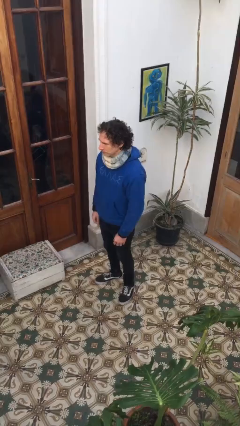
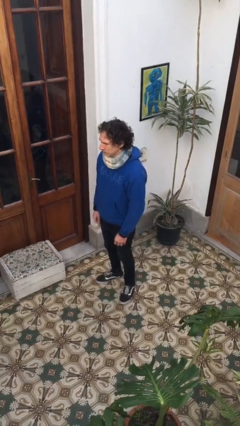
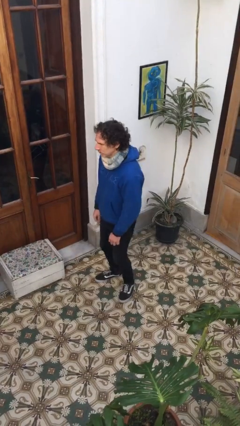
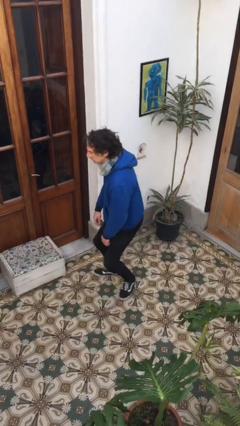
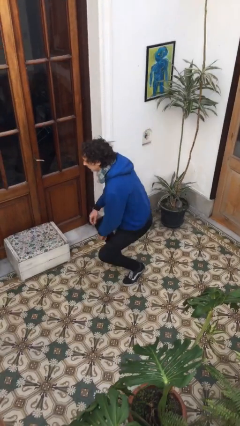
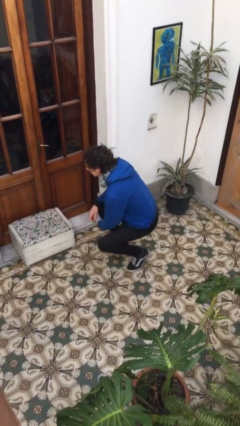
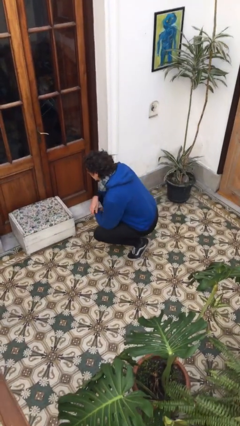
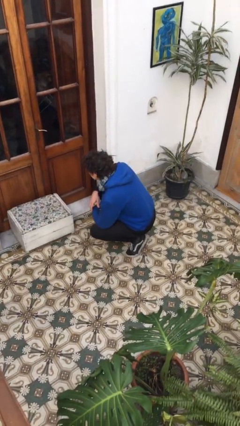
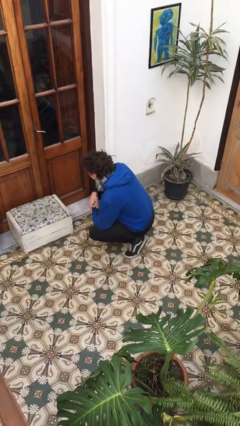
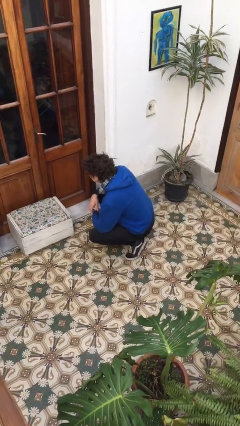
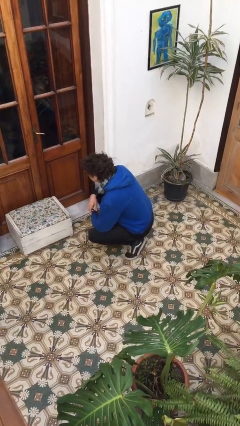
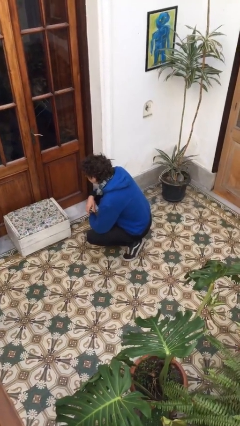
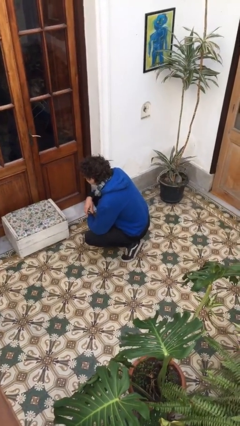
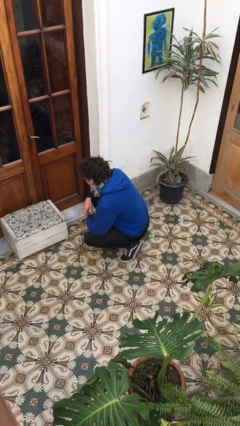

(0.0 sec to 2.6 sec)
person squats

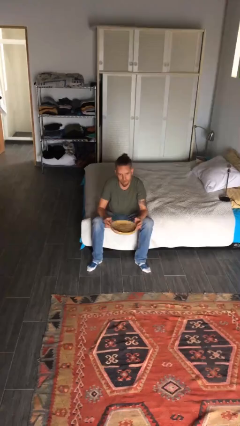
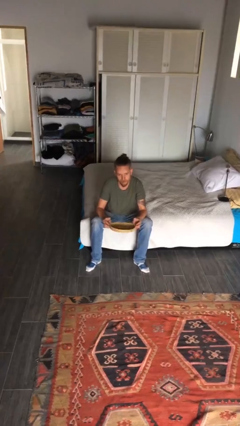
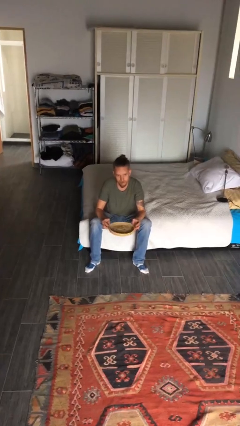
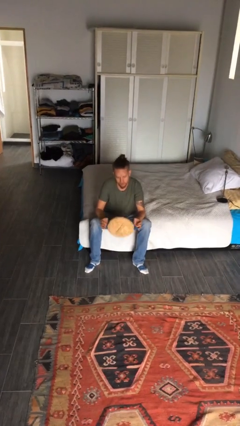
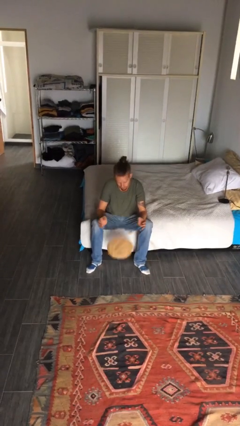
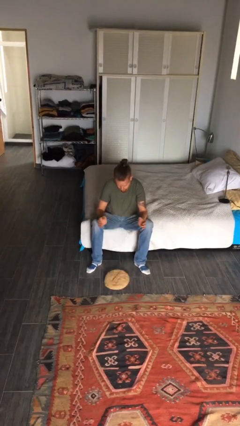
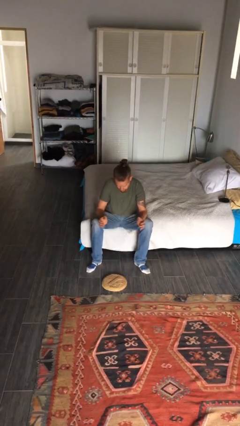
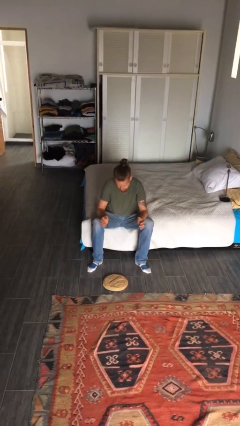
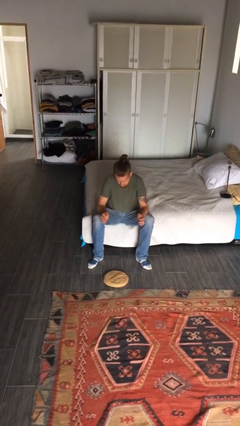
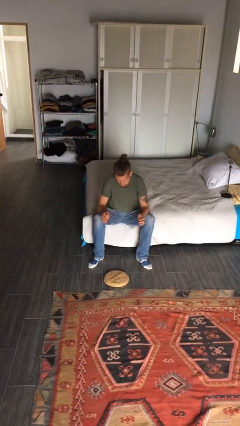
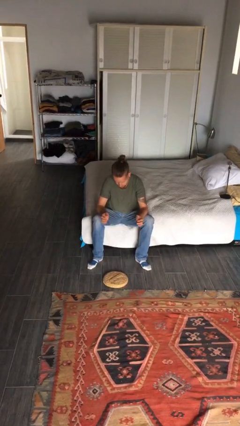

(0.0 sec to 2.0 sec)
person drops object

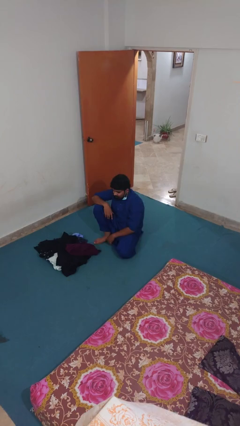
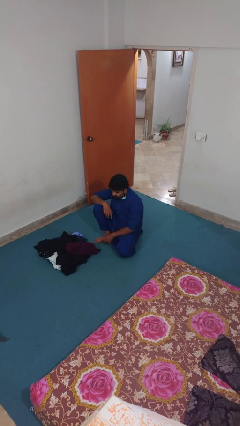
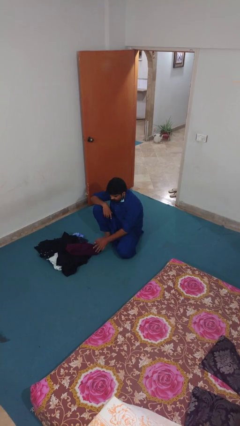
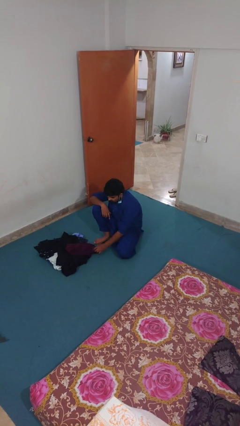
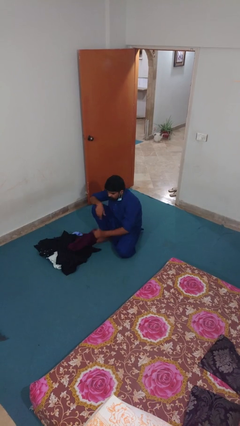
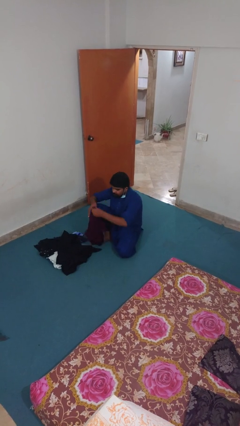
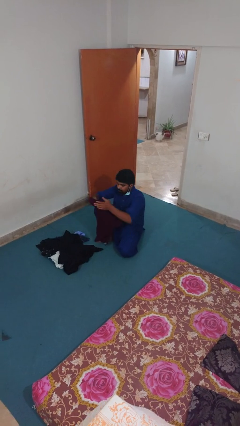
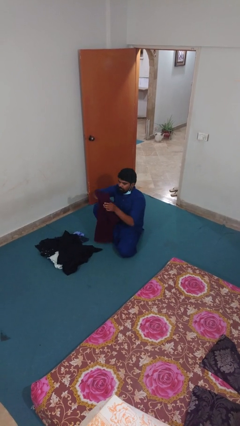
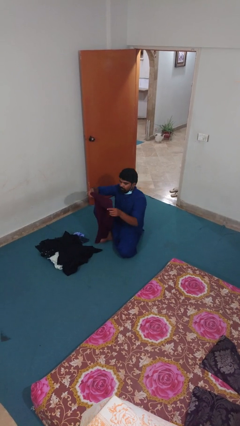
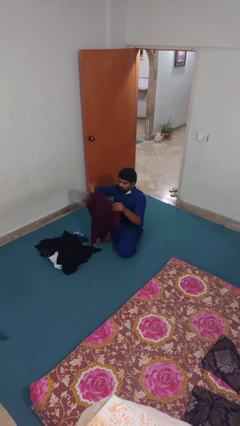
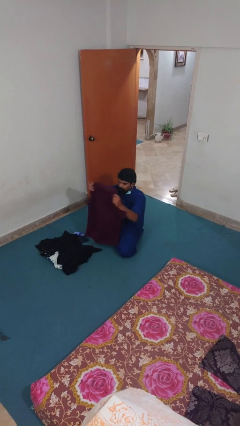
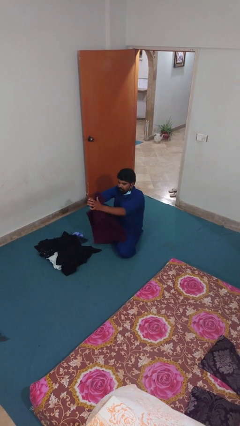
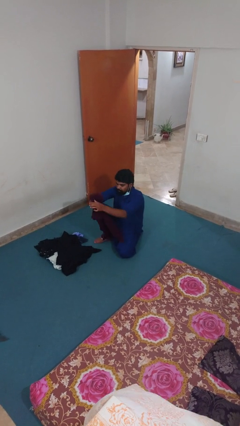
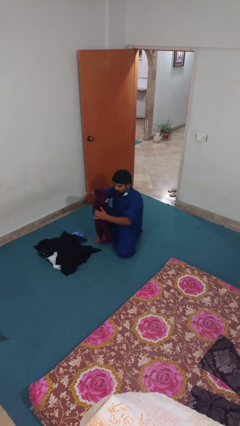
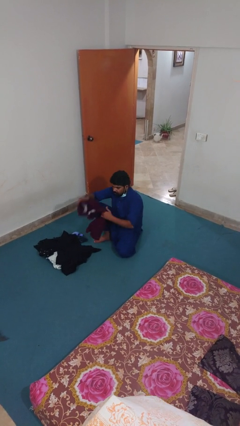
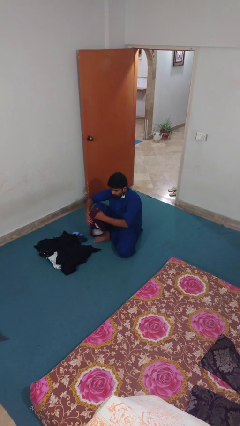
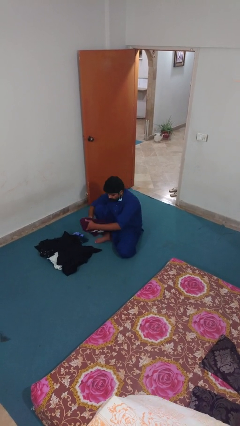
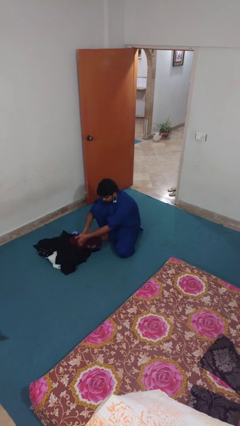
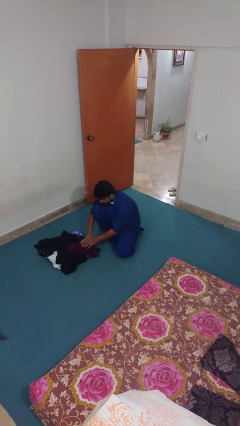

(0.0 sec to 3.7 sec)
person folds shirt

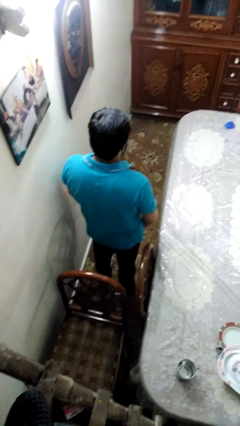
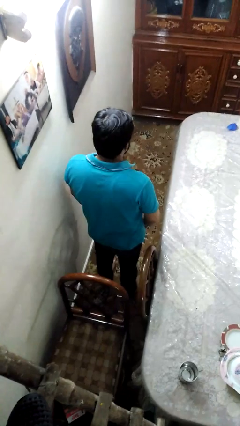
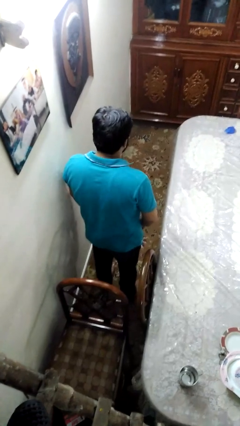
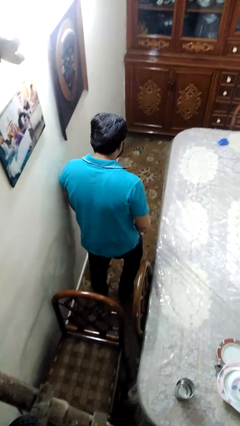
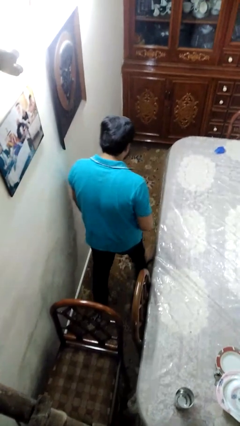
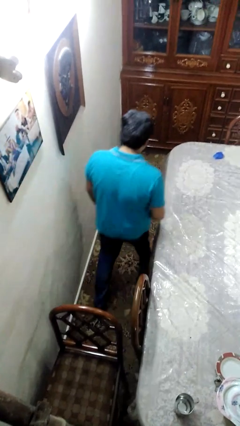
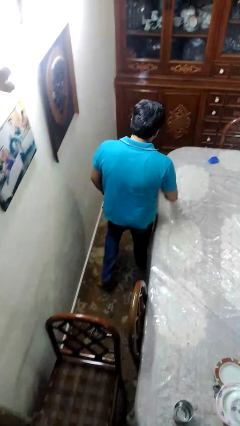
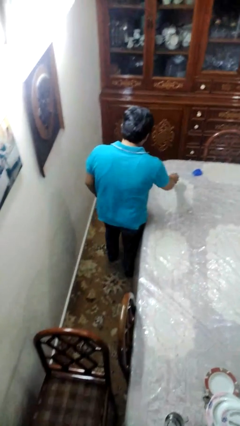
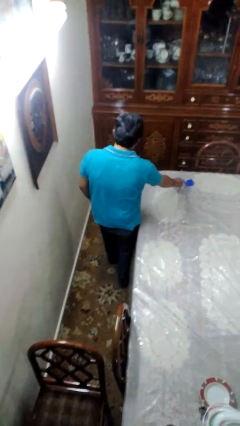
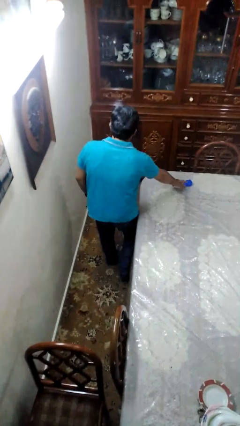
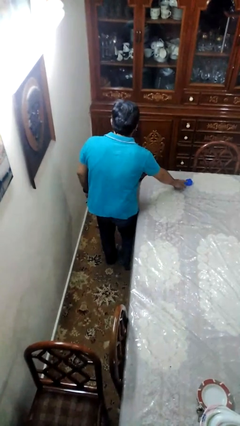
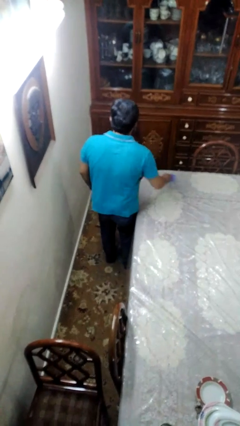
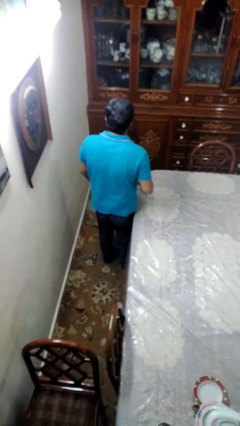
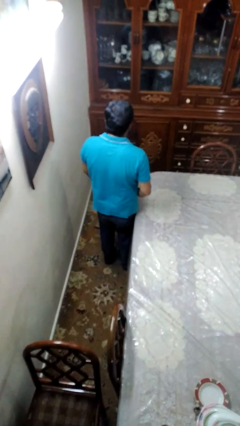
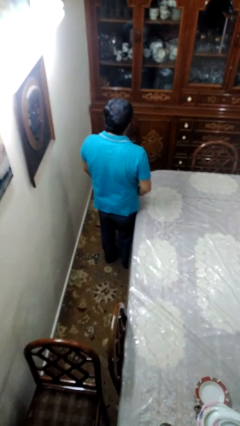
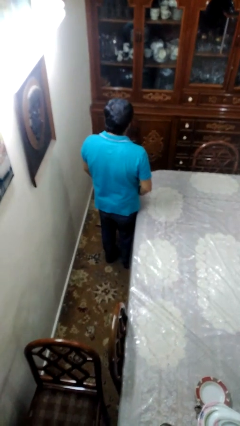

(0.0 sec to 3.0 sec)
person picks up object from table

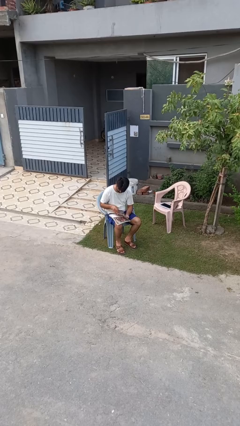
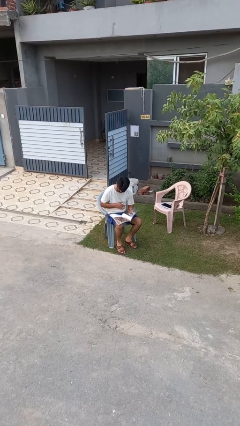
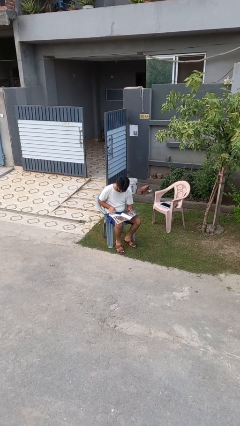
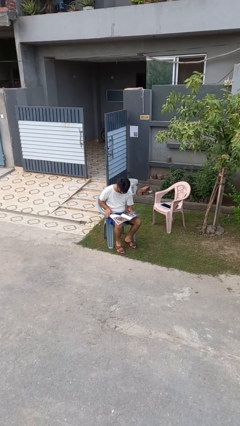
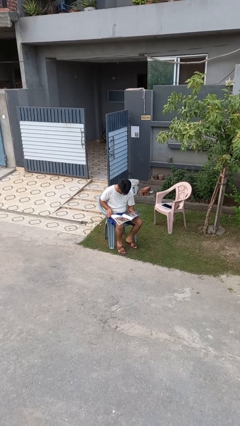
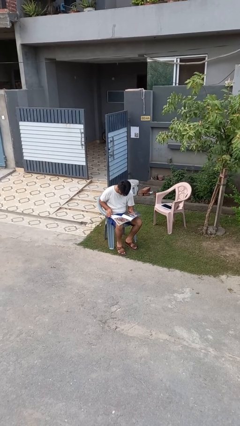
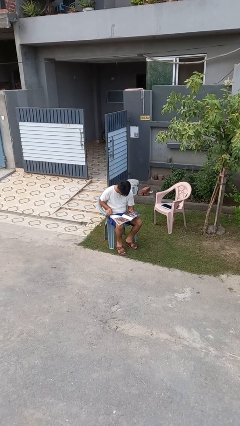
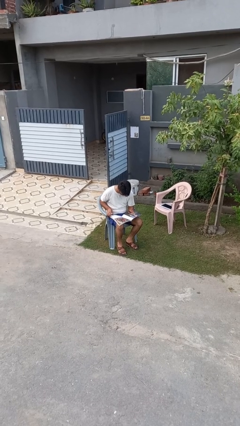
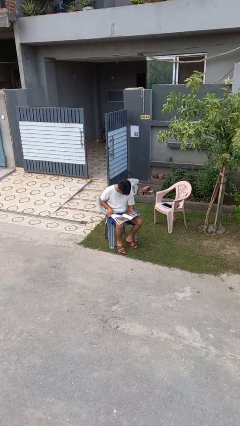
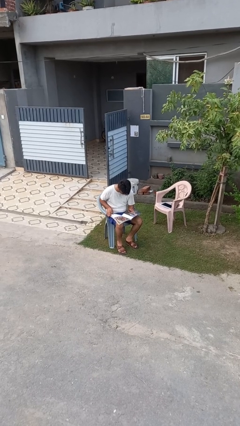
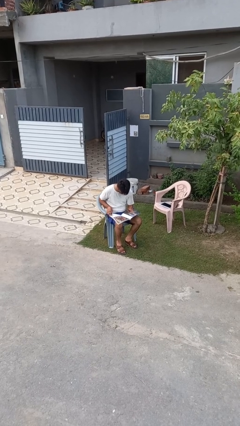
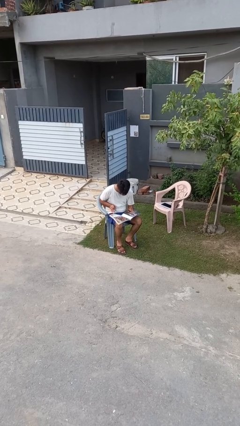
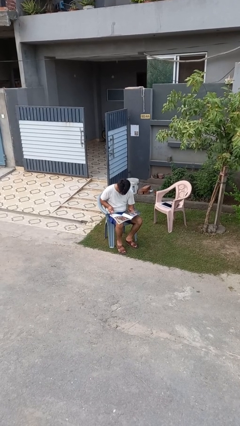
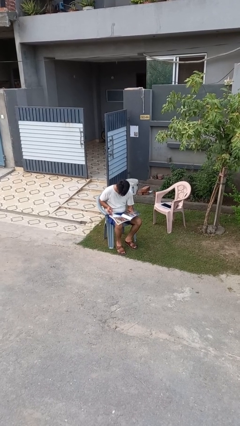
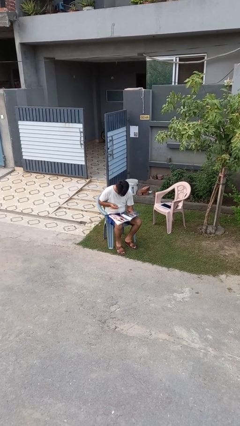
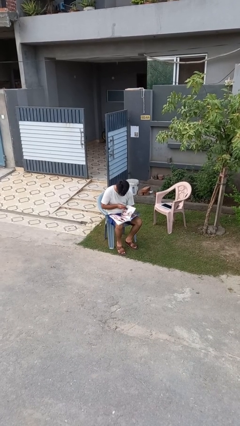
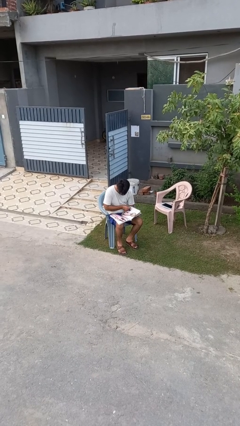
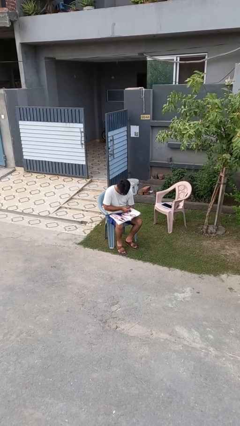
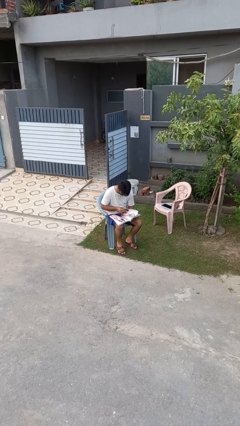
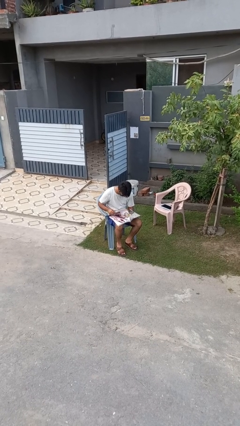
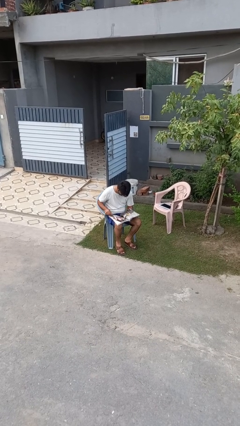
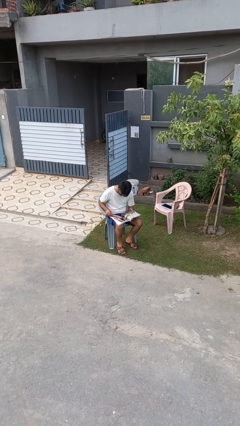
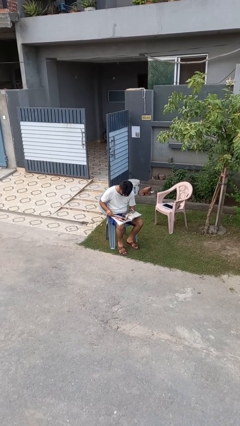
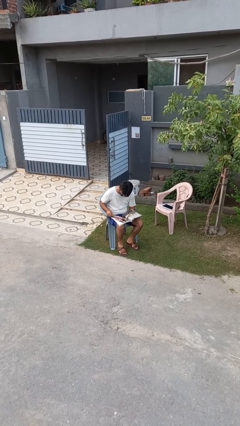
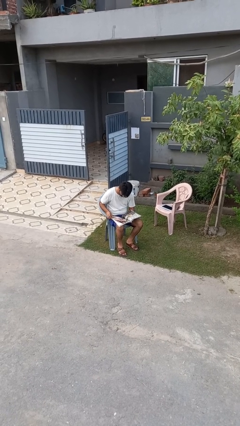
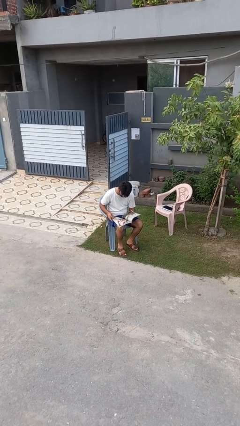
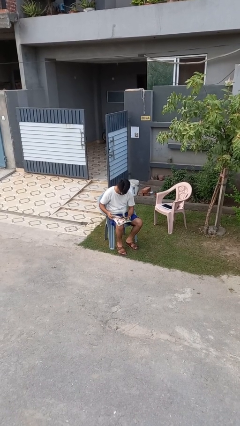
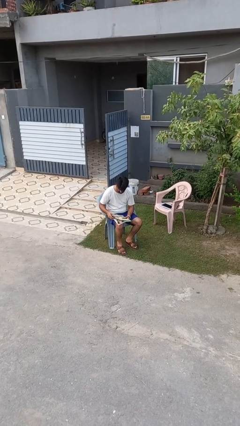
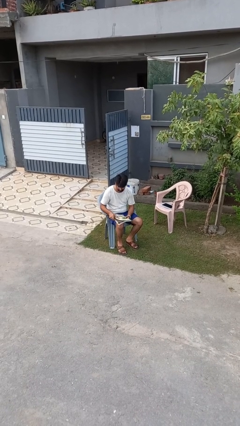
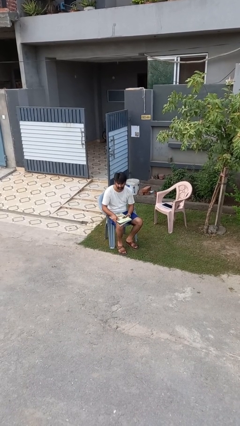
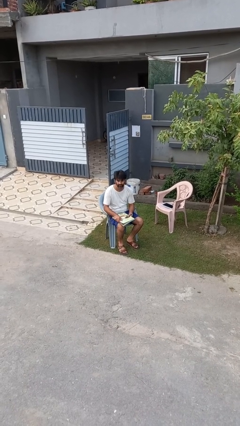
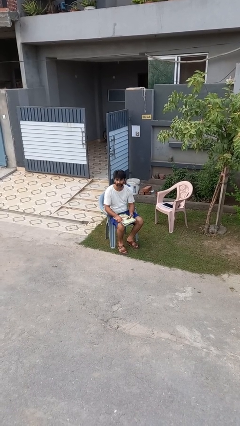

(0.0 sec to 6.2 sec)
person reads magazine

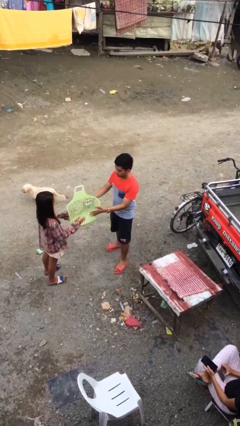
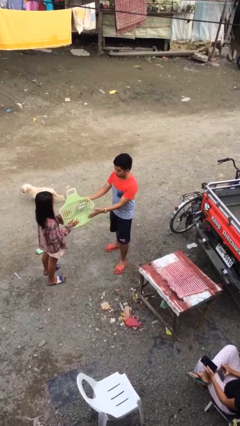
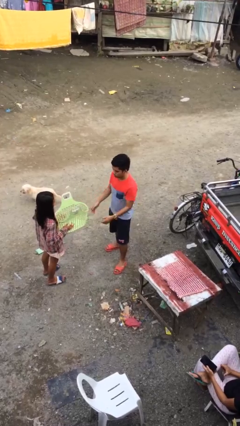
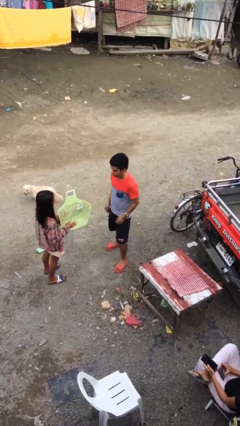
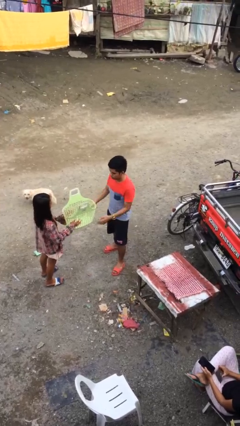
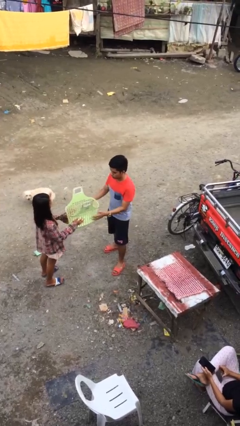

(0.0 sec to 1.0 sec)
person transfers object to person
